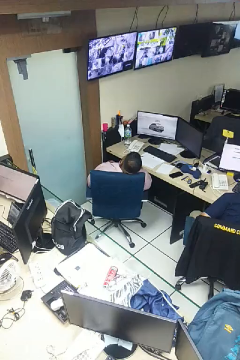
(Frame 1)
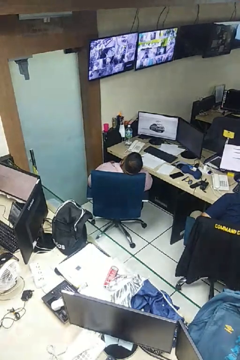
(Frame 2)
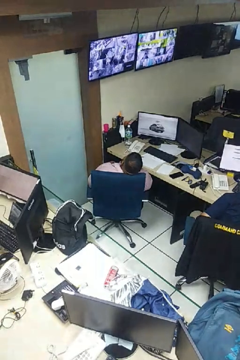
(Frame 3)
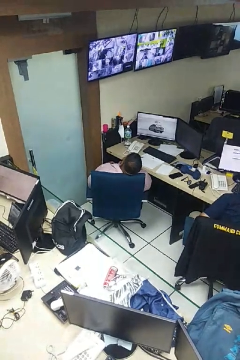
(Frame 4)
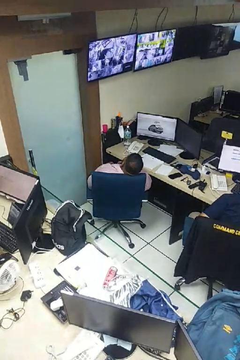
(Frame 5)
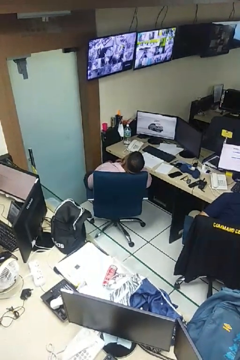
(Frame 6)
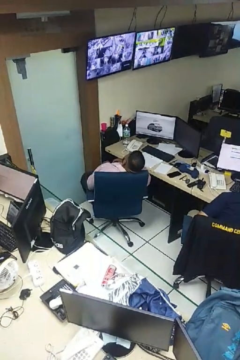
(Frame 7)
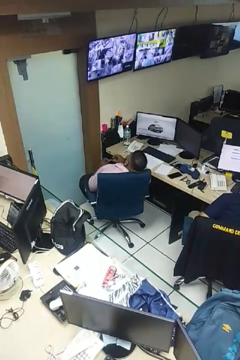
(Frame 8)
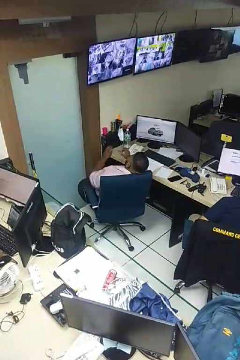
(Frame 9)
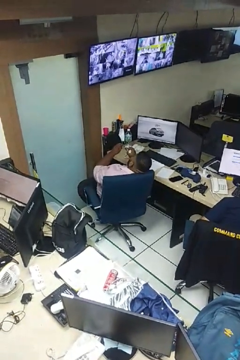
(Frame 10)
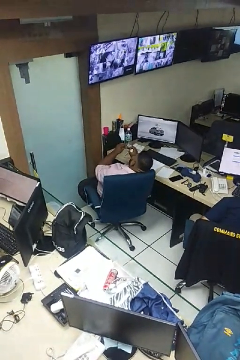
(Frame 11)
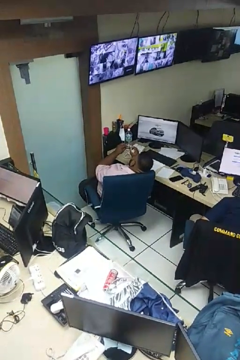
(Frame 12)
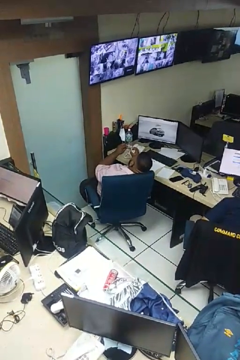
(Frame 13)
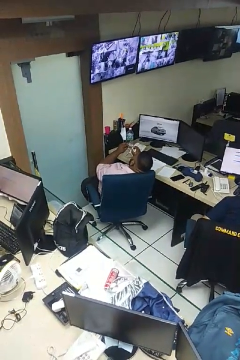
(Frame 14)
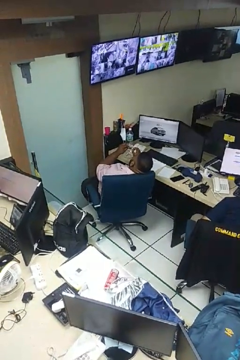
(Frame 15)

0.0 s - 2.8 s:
person clips fingernails

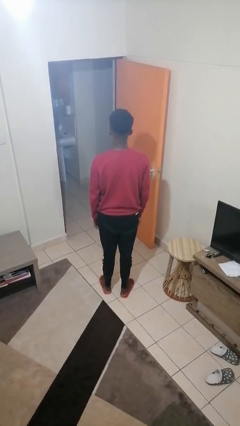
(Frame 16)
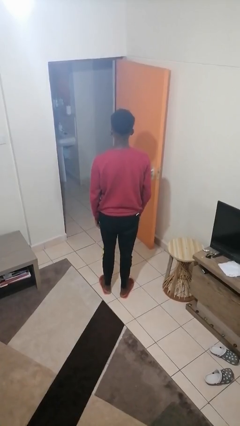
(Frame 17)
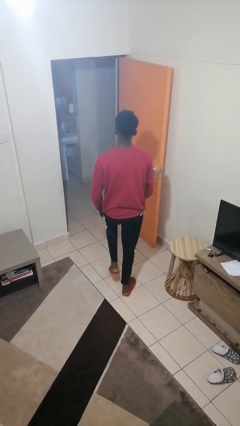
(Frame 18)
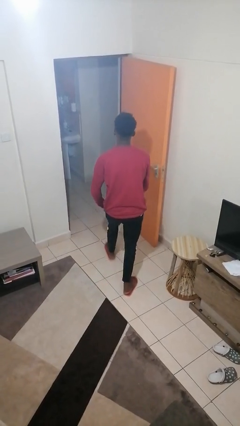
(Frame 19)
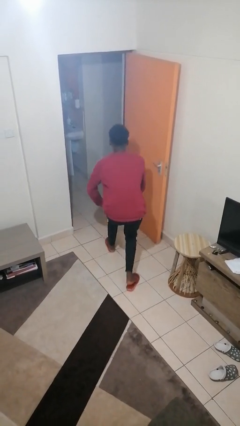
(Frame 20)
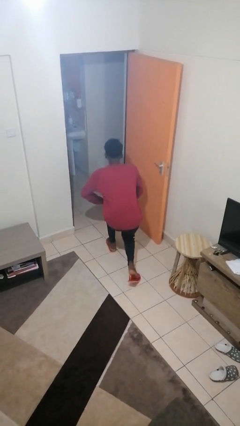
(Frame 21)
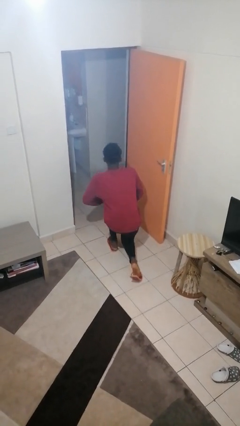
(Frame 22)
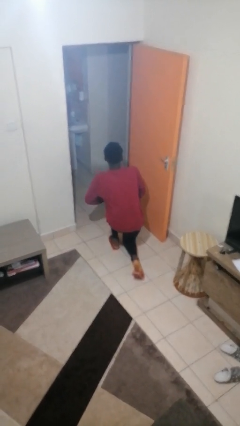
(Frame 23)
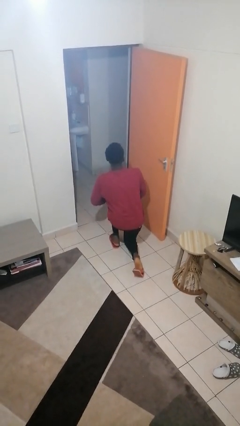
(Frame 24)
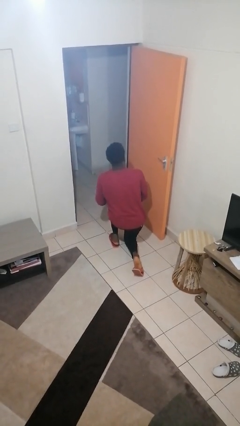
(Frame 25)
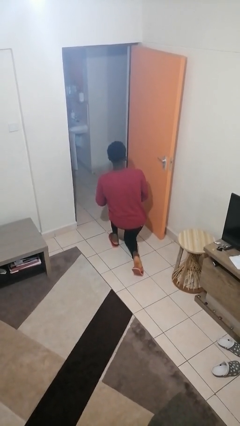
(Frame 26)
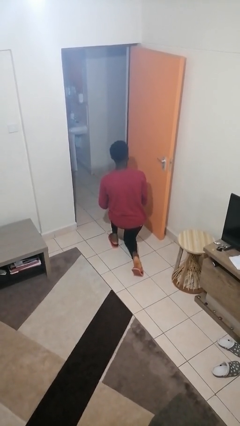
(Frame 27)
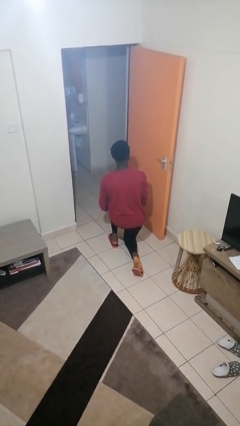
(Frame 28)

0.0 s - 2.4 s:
person kneels

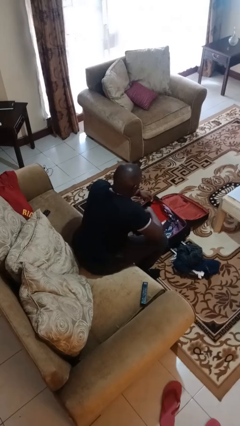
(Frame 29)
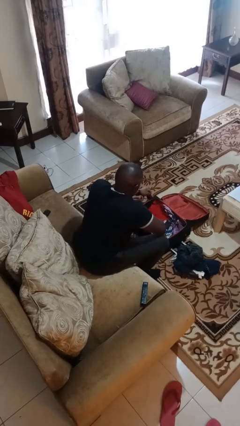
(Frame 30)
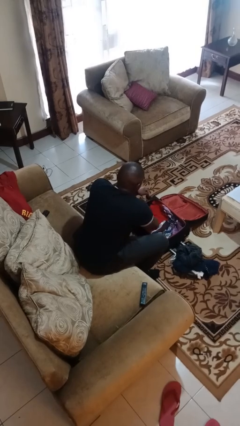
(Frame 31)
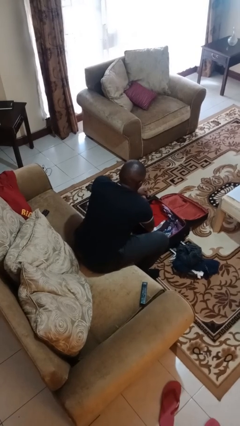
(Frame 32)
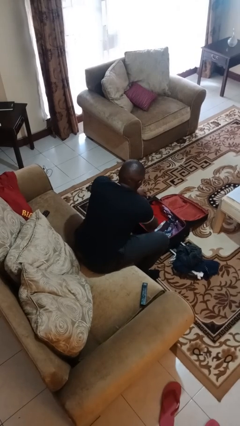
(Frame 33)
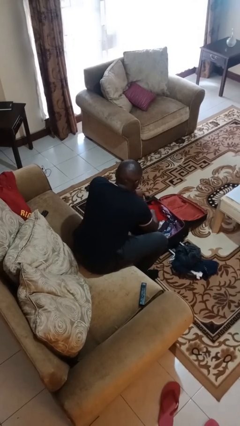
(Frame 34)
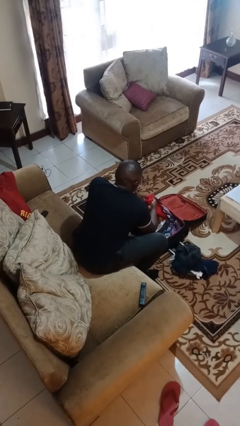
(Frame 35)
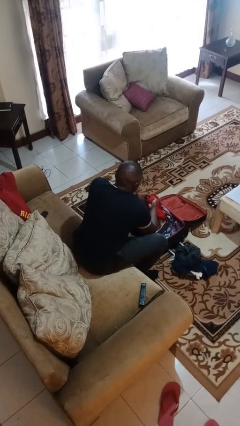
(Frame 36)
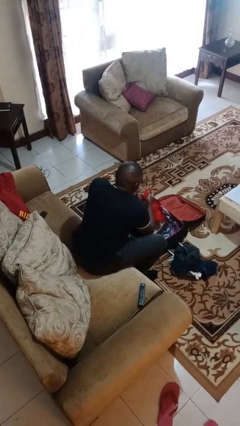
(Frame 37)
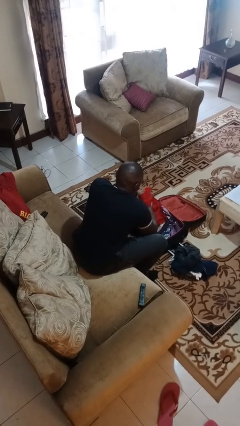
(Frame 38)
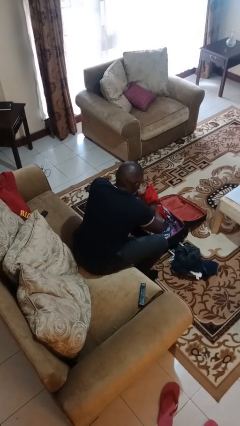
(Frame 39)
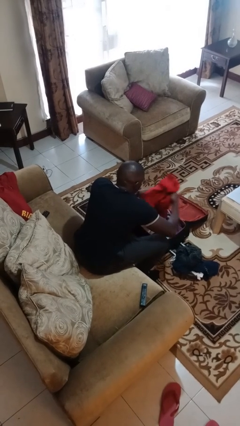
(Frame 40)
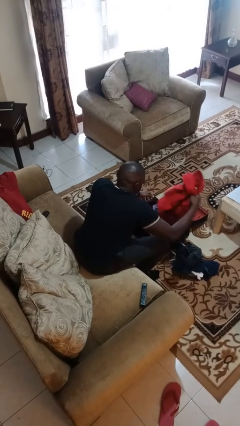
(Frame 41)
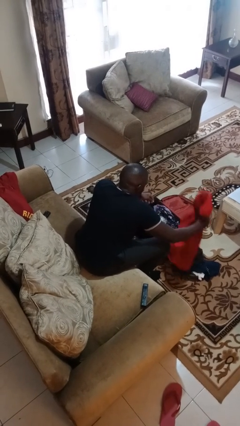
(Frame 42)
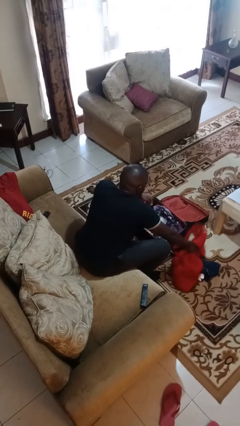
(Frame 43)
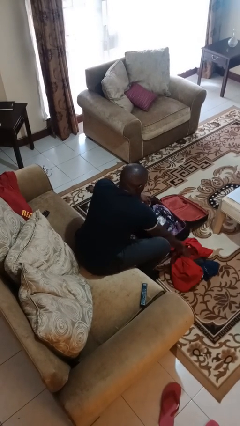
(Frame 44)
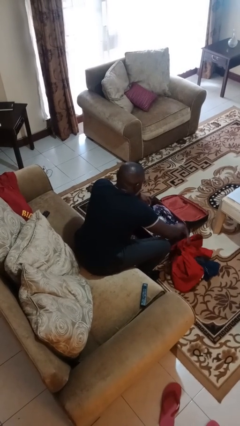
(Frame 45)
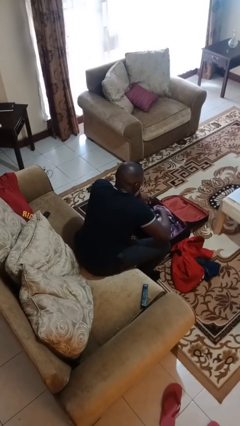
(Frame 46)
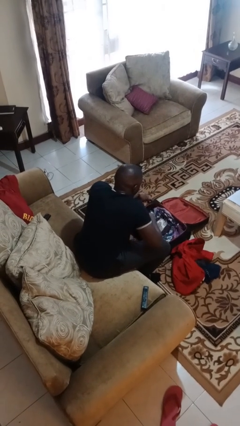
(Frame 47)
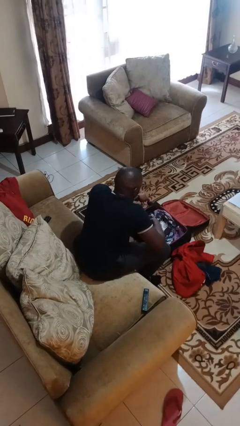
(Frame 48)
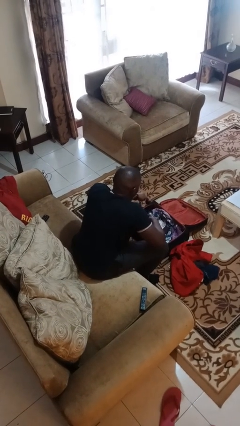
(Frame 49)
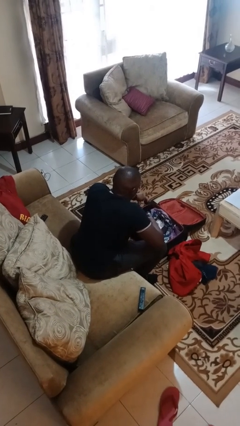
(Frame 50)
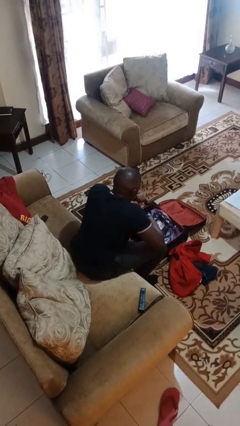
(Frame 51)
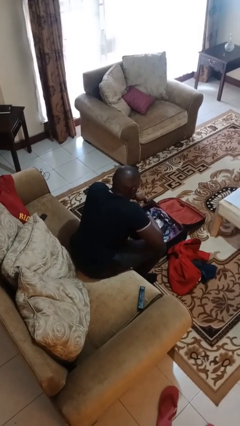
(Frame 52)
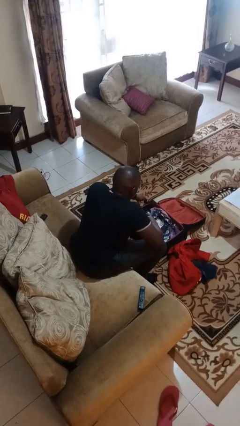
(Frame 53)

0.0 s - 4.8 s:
person unloads clothes from suitcase

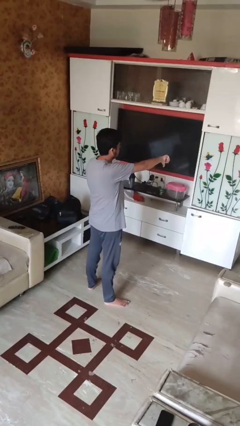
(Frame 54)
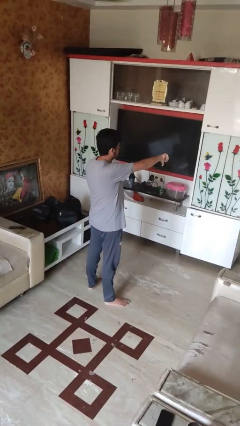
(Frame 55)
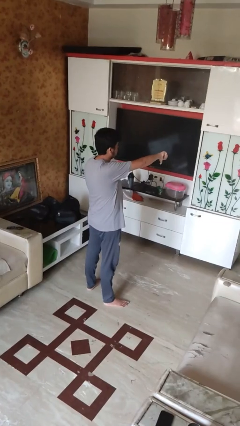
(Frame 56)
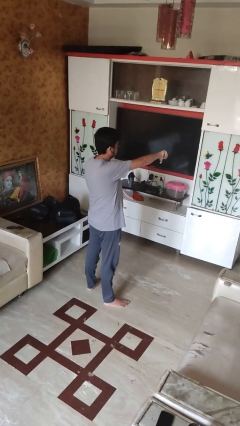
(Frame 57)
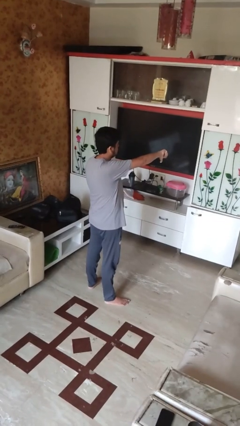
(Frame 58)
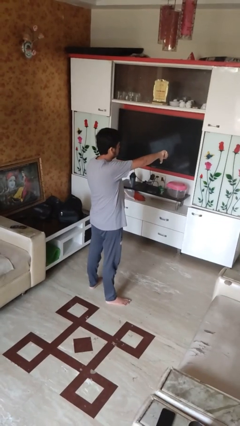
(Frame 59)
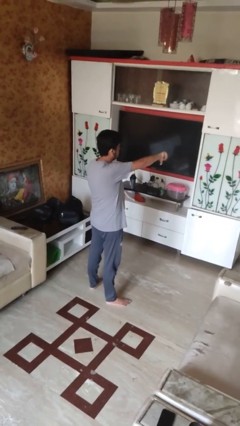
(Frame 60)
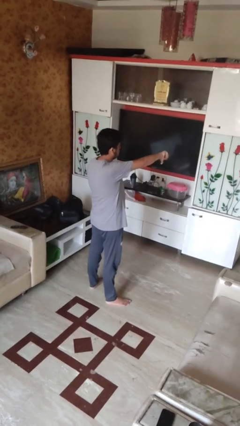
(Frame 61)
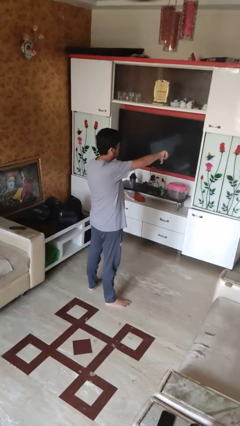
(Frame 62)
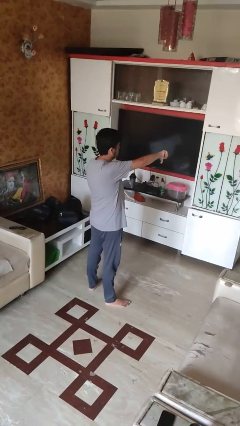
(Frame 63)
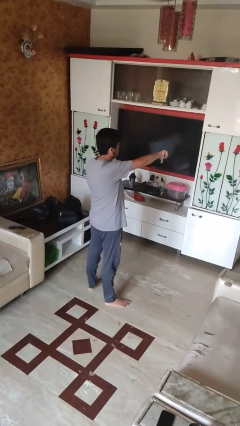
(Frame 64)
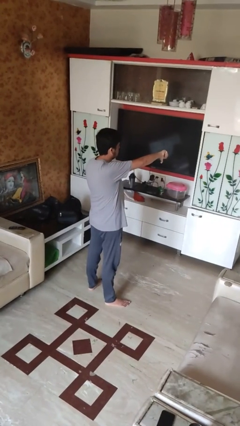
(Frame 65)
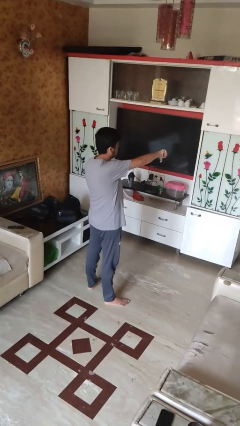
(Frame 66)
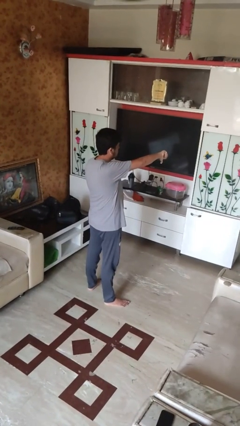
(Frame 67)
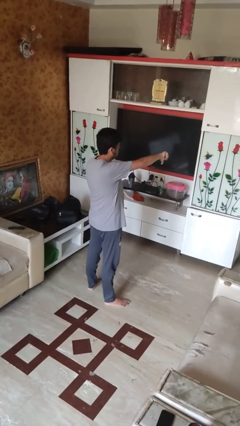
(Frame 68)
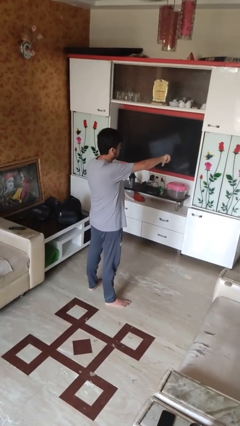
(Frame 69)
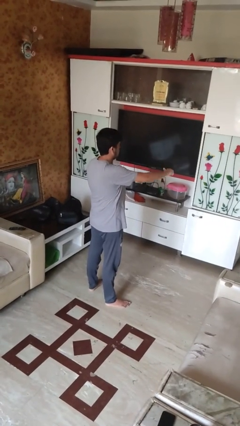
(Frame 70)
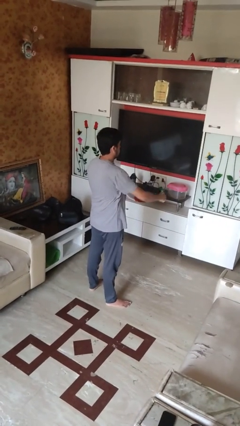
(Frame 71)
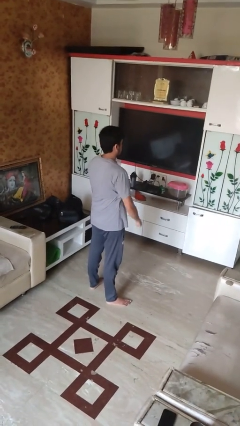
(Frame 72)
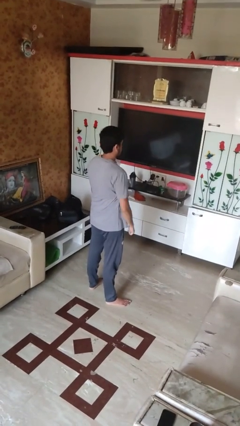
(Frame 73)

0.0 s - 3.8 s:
person gestures thumbs down

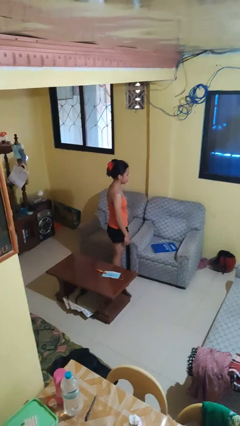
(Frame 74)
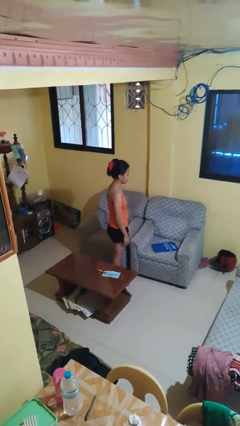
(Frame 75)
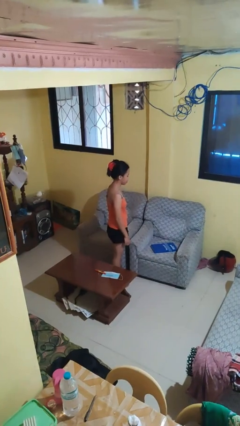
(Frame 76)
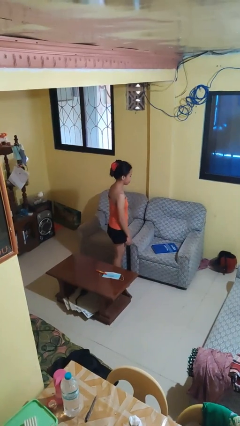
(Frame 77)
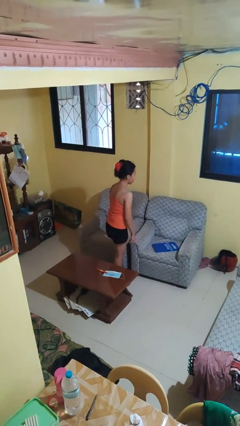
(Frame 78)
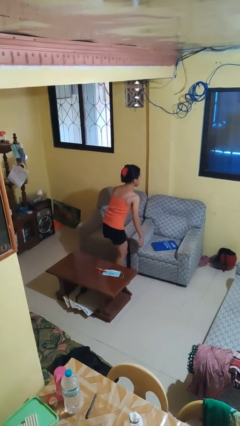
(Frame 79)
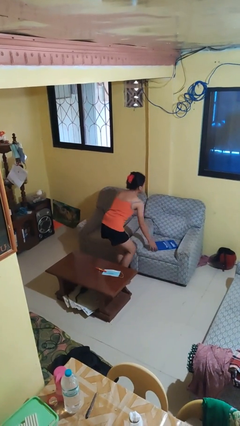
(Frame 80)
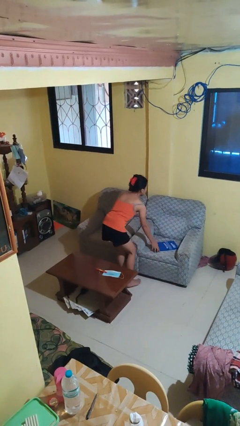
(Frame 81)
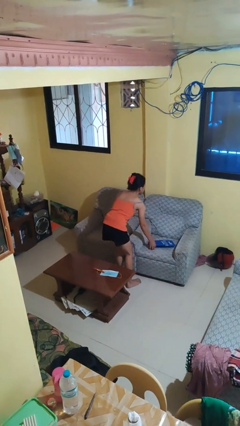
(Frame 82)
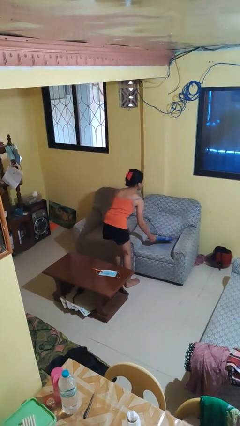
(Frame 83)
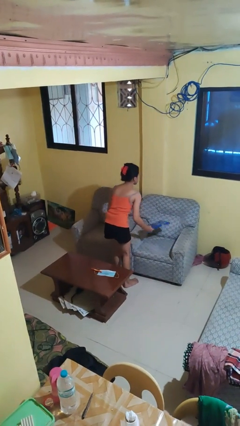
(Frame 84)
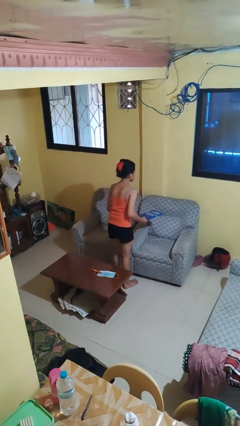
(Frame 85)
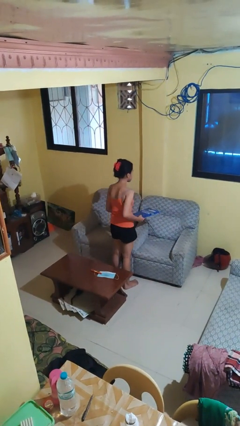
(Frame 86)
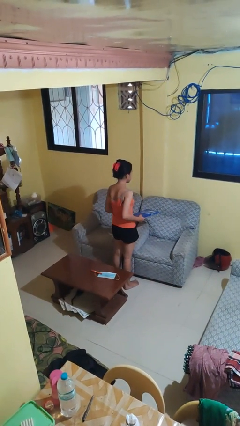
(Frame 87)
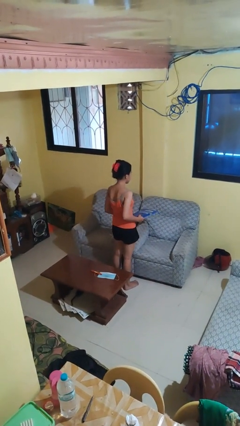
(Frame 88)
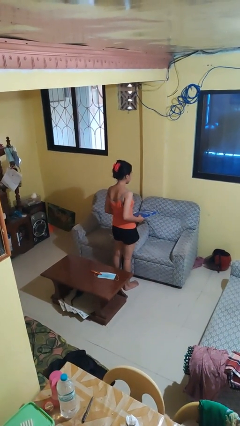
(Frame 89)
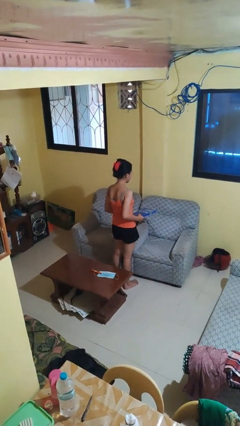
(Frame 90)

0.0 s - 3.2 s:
person picks up object from couch

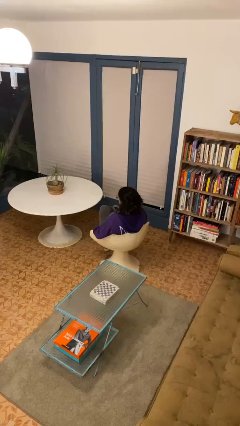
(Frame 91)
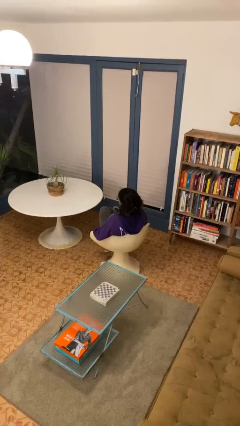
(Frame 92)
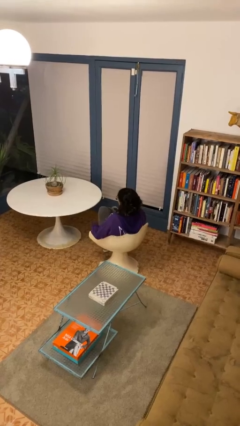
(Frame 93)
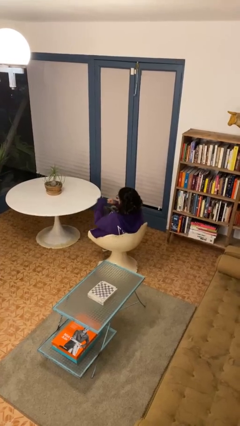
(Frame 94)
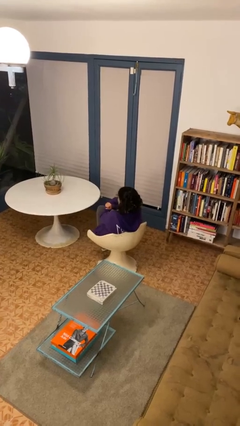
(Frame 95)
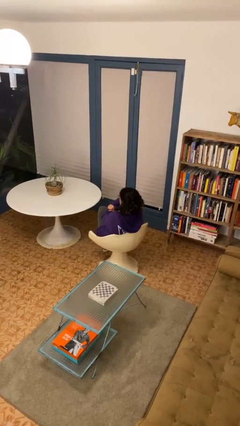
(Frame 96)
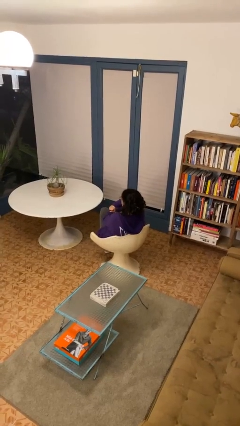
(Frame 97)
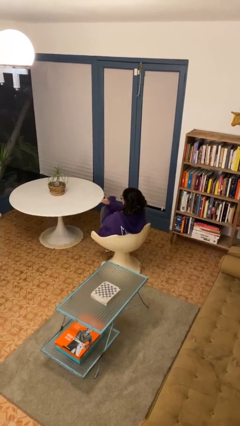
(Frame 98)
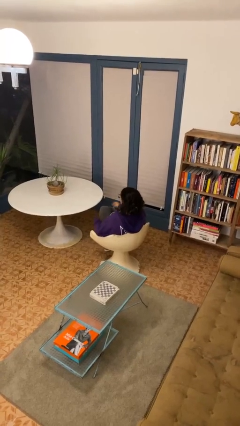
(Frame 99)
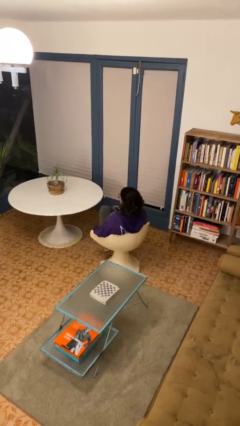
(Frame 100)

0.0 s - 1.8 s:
person gestures arms x
